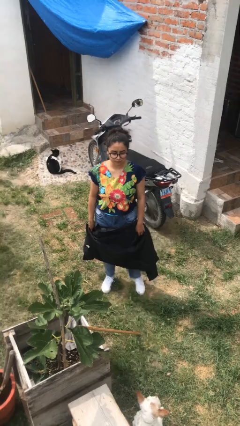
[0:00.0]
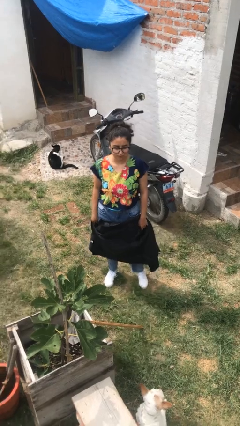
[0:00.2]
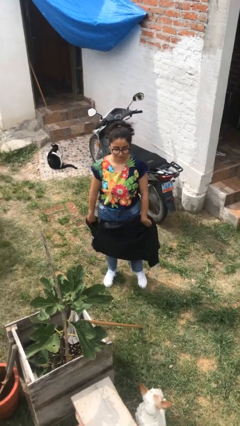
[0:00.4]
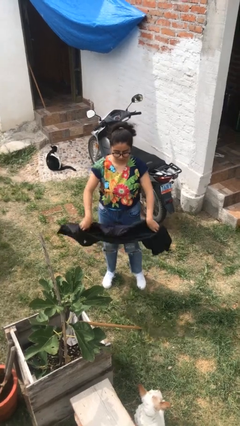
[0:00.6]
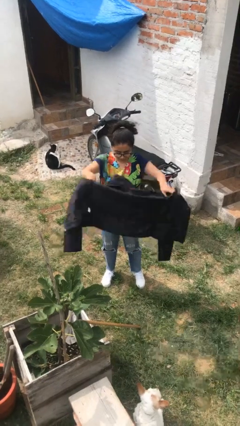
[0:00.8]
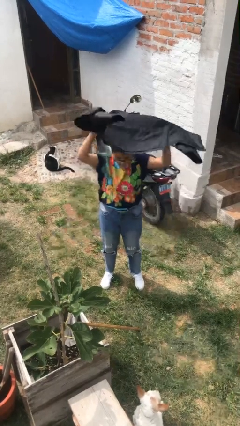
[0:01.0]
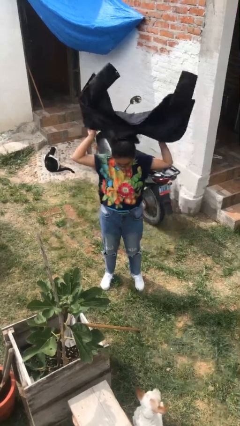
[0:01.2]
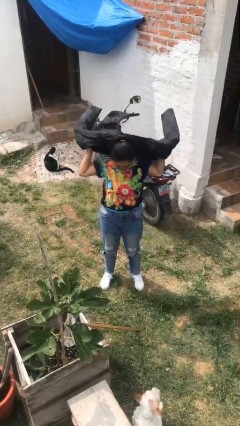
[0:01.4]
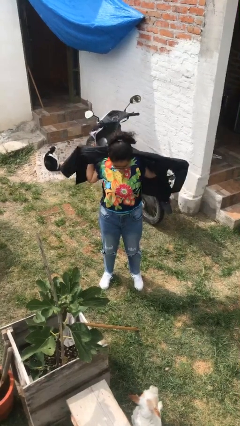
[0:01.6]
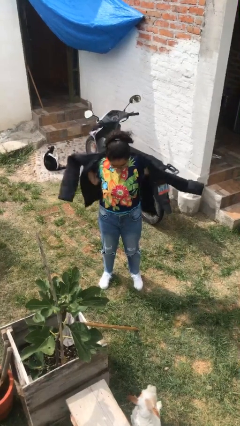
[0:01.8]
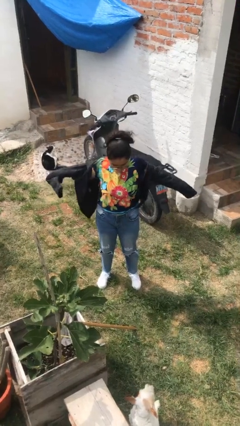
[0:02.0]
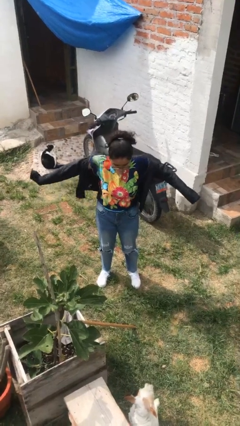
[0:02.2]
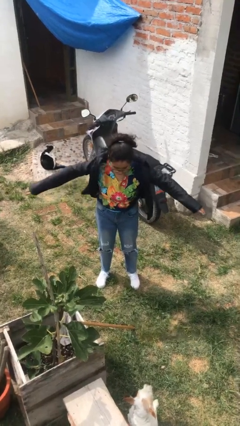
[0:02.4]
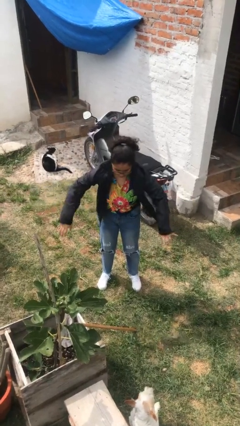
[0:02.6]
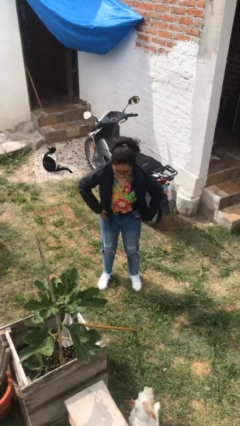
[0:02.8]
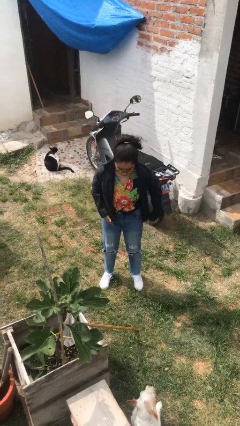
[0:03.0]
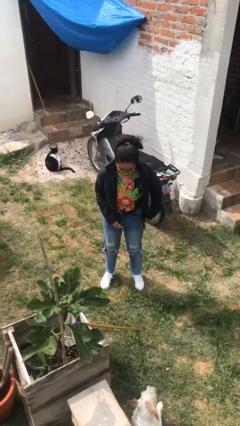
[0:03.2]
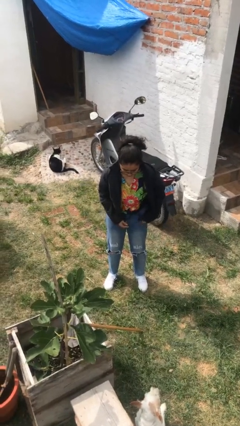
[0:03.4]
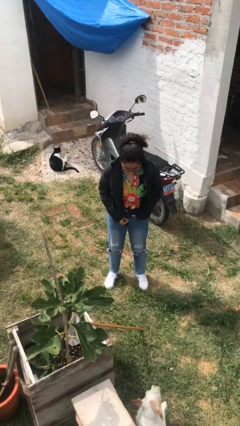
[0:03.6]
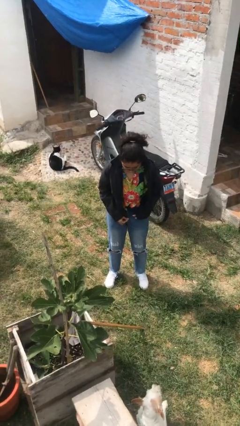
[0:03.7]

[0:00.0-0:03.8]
person puts on jacket

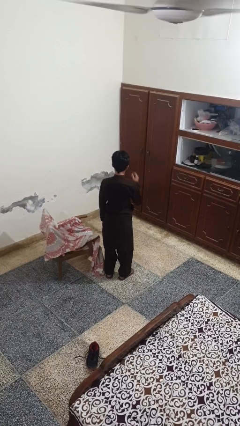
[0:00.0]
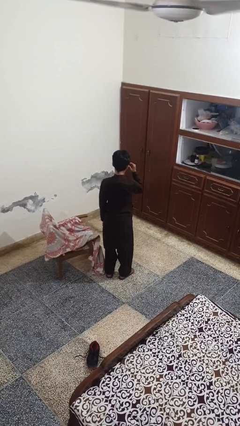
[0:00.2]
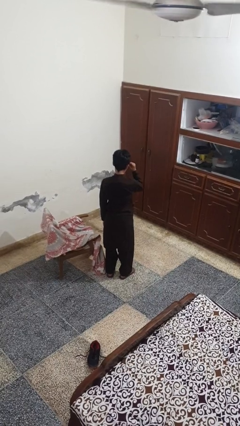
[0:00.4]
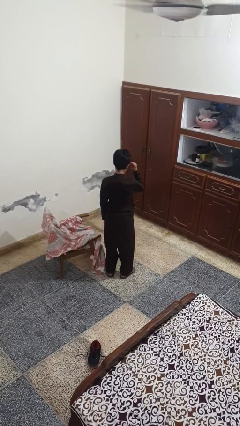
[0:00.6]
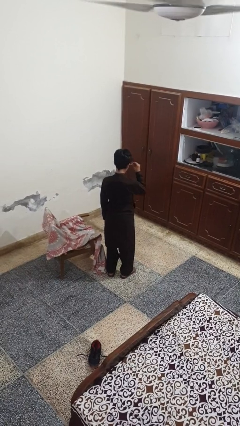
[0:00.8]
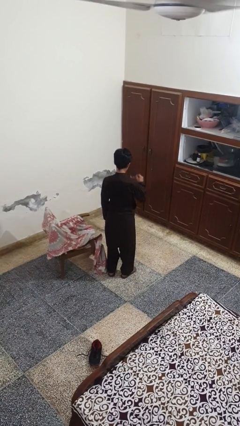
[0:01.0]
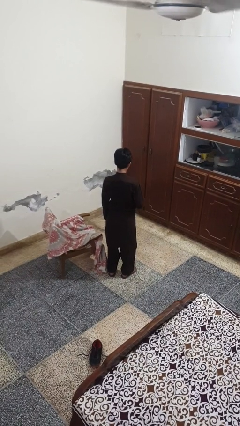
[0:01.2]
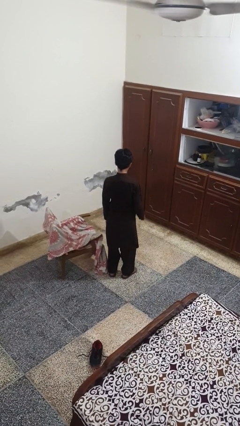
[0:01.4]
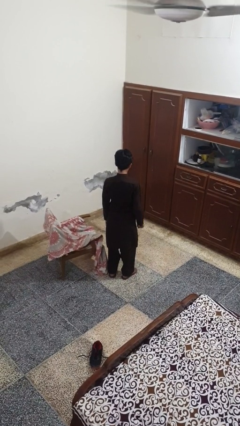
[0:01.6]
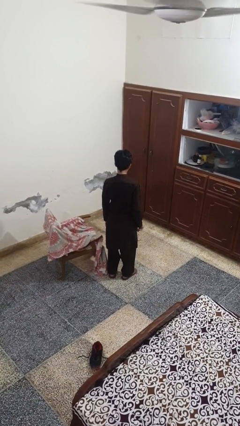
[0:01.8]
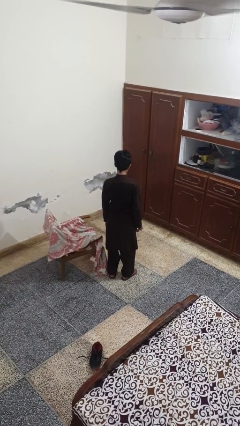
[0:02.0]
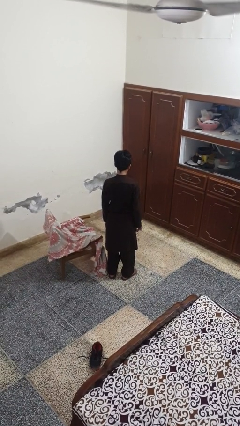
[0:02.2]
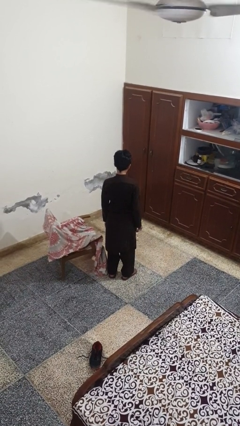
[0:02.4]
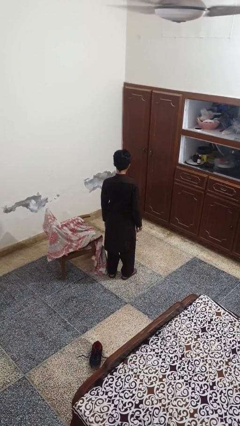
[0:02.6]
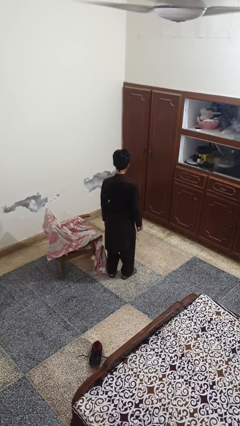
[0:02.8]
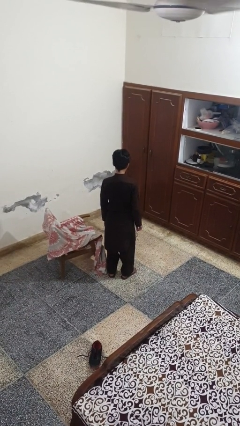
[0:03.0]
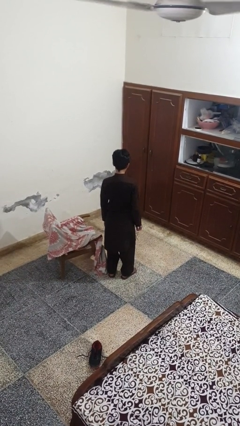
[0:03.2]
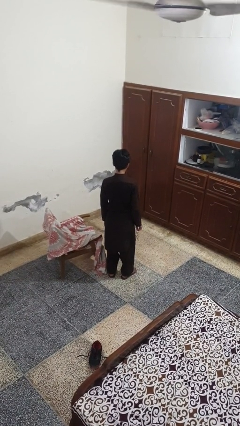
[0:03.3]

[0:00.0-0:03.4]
person takes off glasses

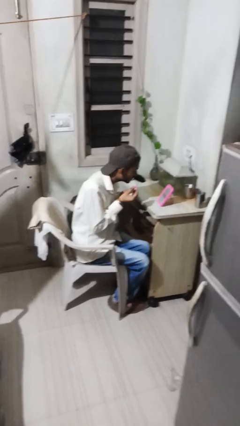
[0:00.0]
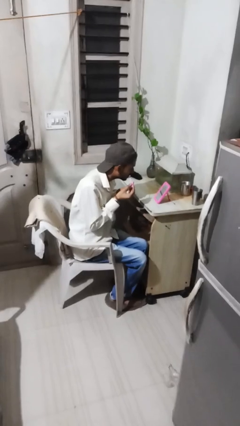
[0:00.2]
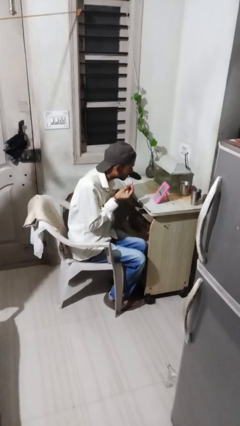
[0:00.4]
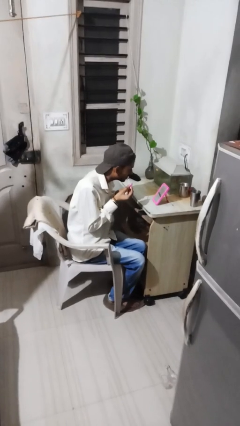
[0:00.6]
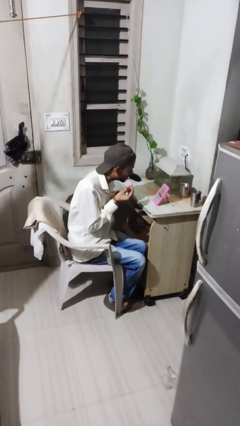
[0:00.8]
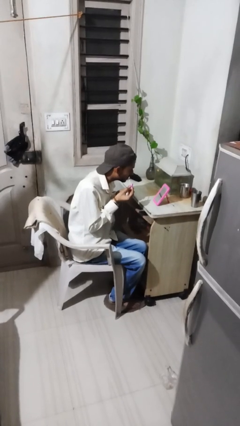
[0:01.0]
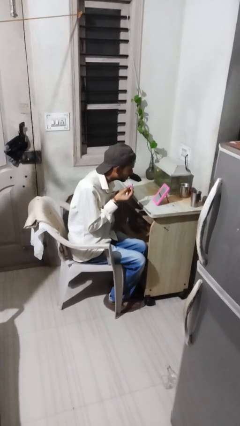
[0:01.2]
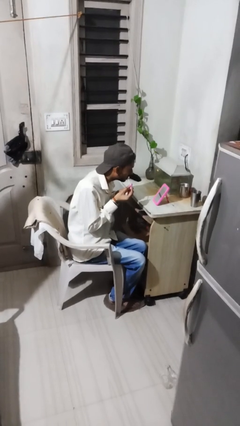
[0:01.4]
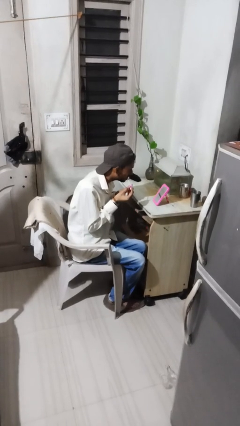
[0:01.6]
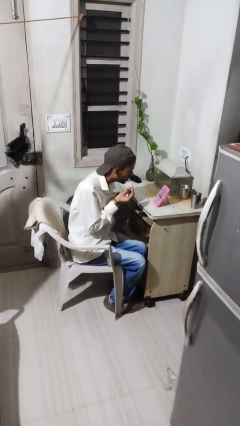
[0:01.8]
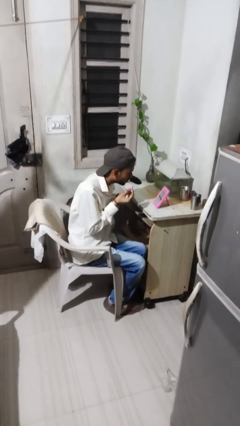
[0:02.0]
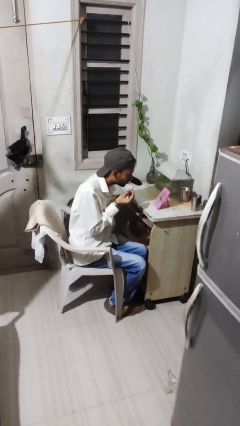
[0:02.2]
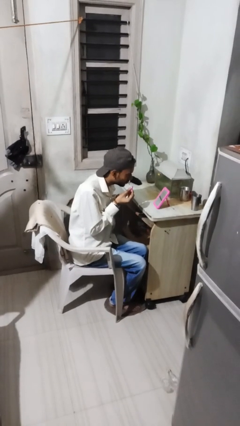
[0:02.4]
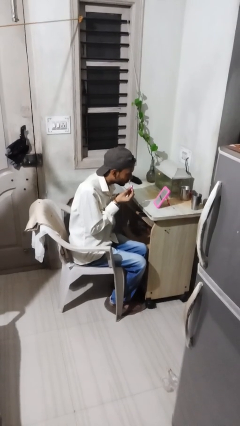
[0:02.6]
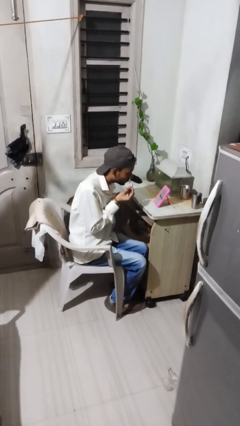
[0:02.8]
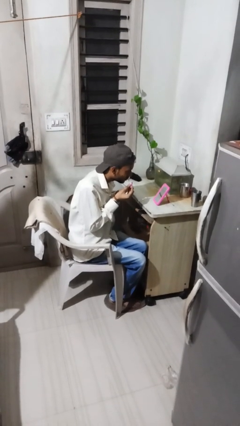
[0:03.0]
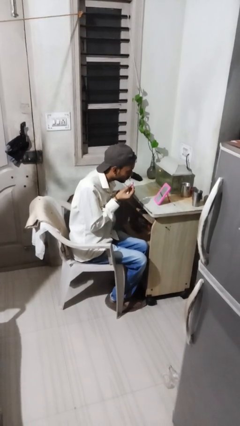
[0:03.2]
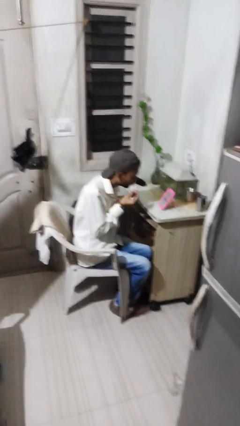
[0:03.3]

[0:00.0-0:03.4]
person applies lip makeup

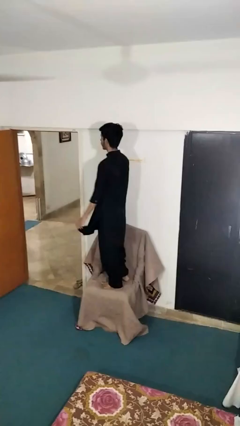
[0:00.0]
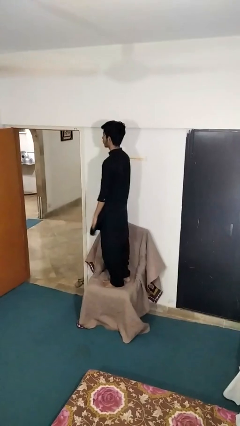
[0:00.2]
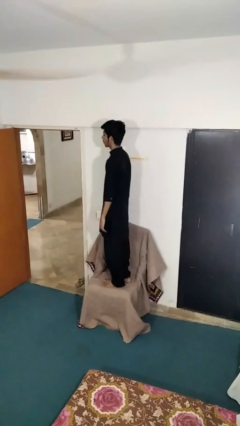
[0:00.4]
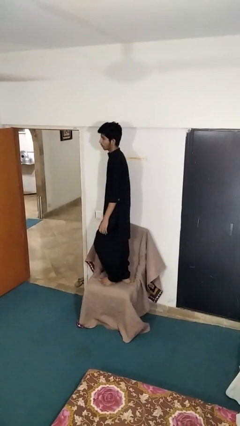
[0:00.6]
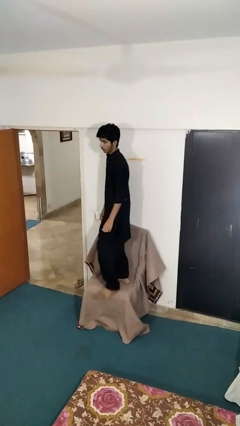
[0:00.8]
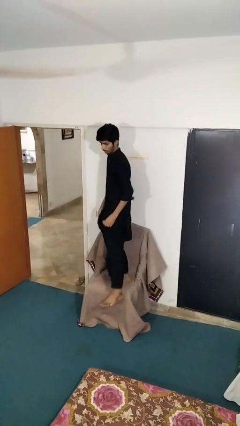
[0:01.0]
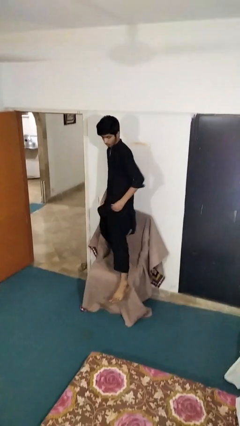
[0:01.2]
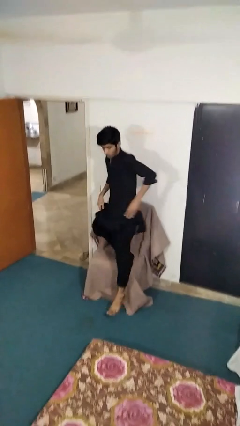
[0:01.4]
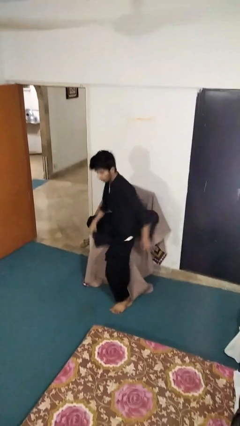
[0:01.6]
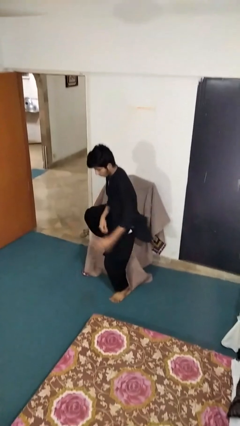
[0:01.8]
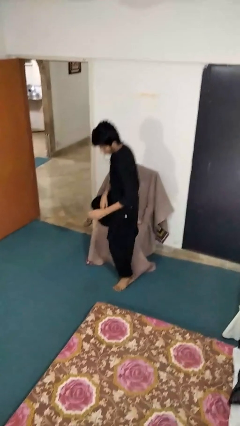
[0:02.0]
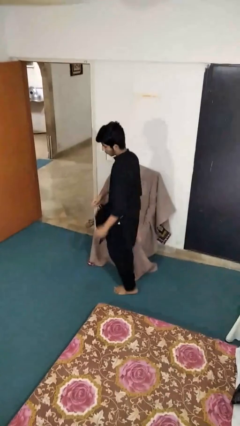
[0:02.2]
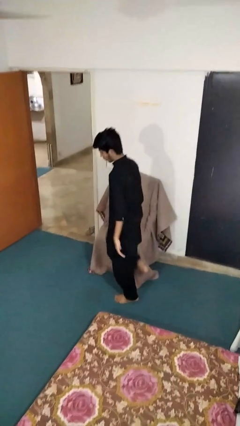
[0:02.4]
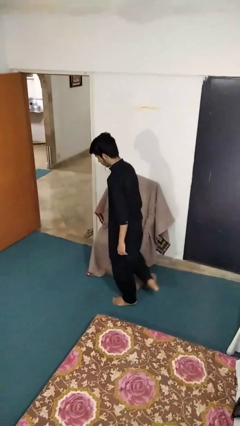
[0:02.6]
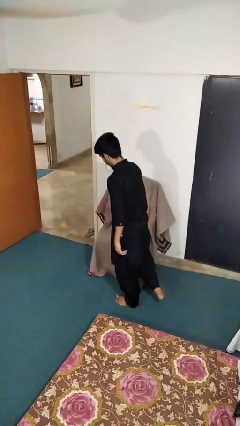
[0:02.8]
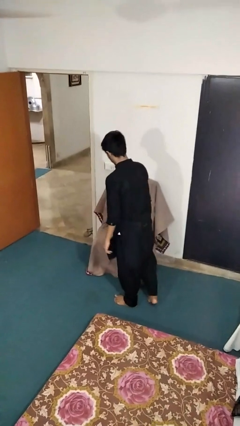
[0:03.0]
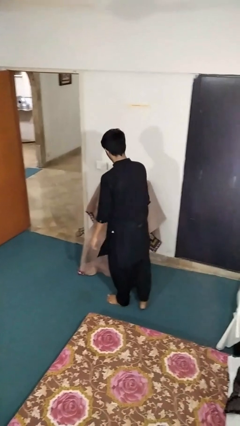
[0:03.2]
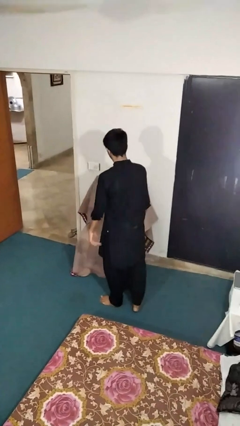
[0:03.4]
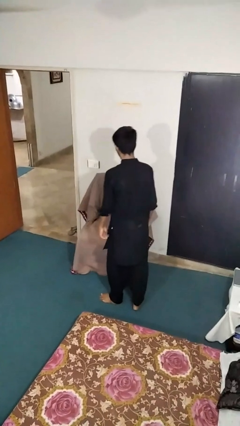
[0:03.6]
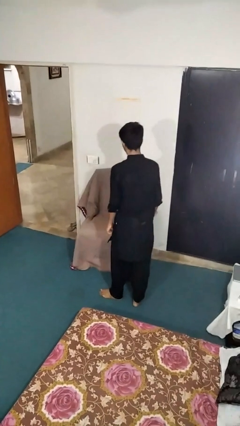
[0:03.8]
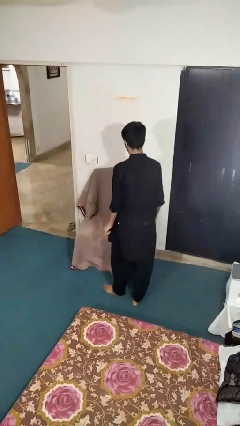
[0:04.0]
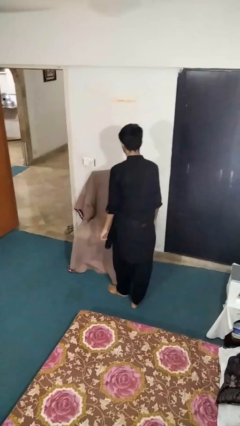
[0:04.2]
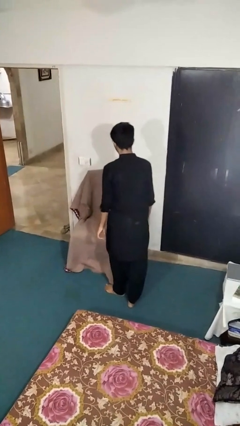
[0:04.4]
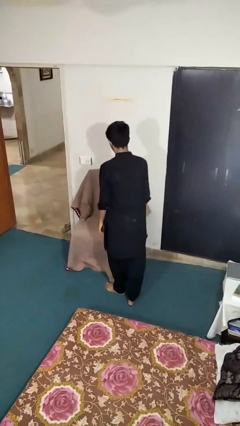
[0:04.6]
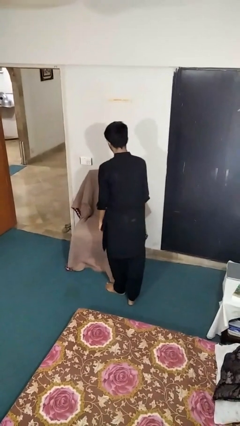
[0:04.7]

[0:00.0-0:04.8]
person climbs off couch

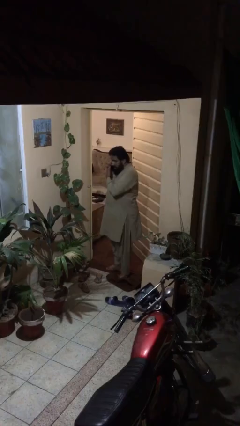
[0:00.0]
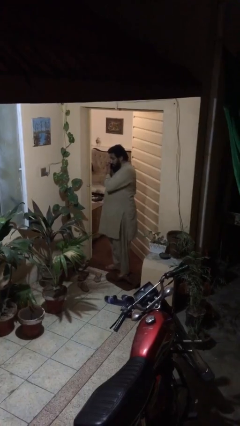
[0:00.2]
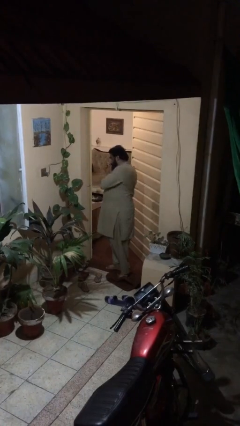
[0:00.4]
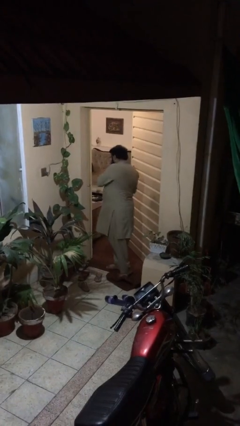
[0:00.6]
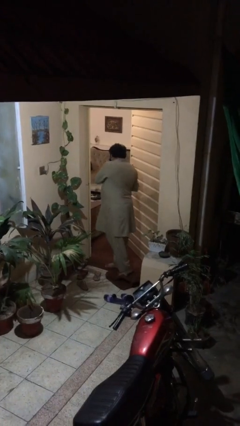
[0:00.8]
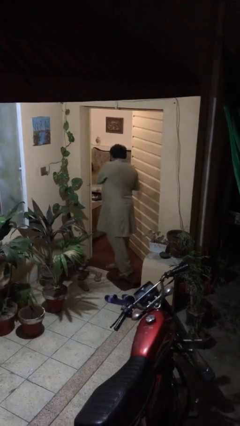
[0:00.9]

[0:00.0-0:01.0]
person closes facility door

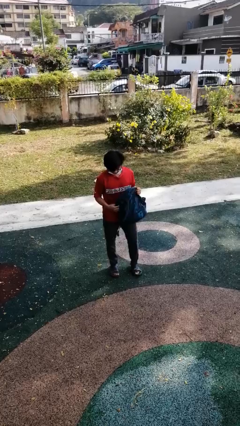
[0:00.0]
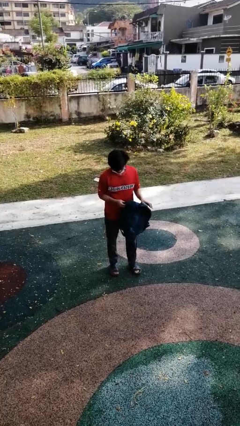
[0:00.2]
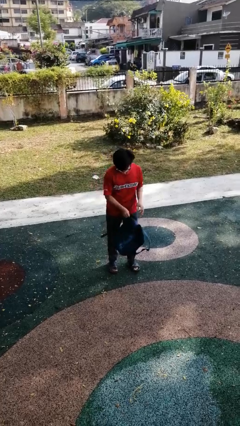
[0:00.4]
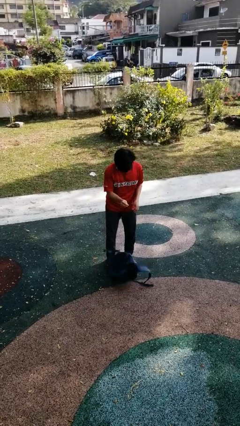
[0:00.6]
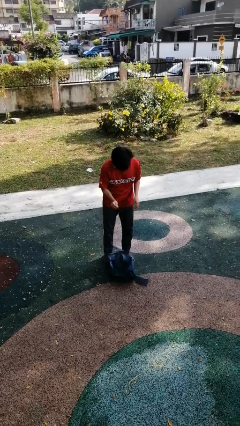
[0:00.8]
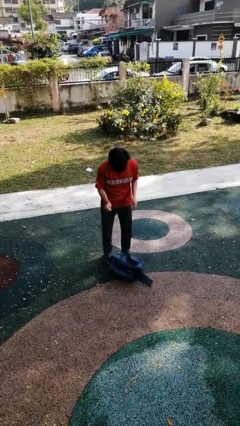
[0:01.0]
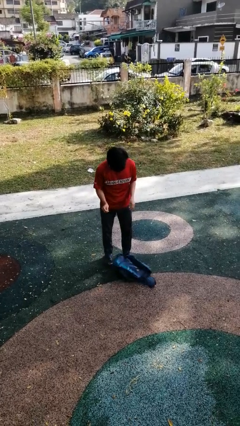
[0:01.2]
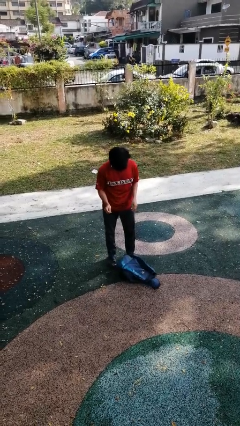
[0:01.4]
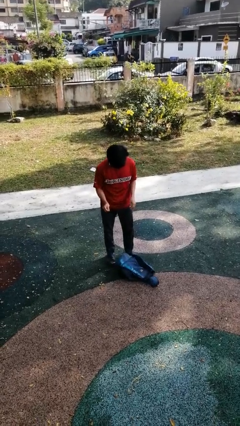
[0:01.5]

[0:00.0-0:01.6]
person drops object
